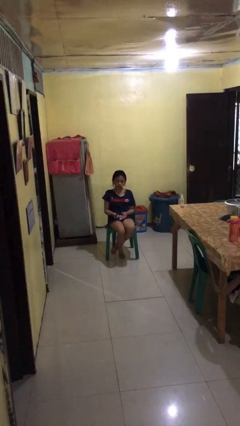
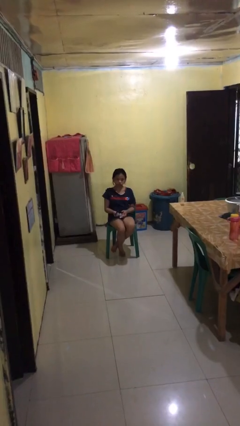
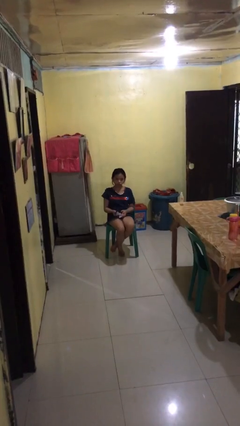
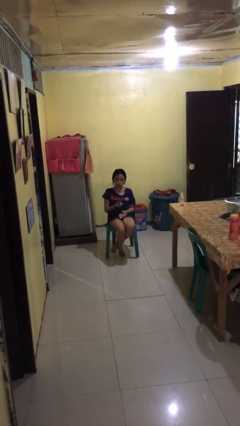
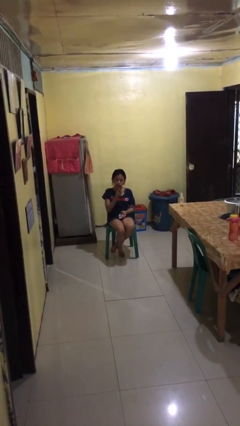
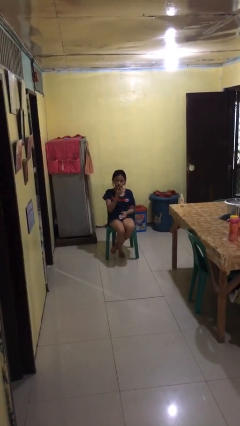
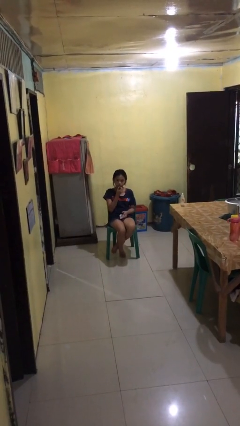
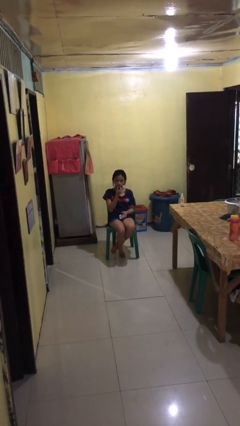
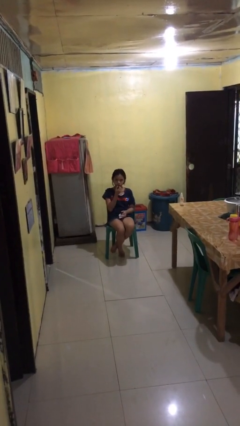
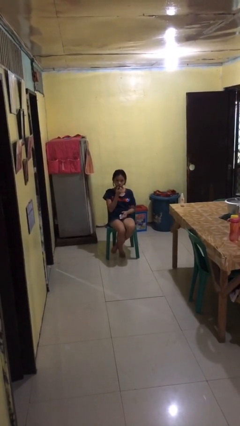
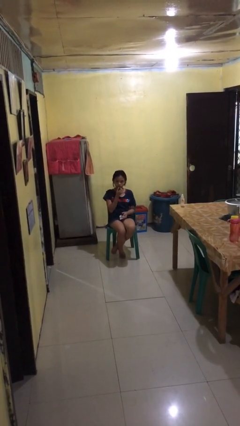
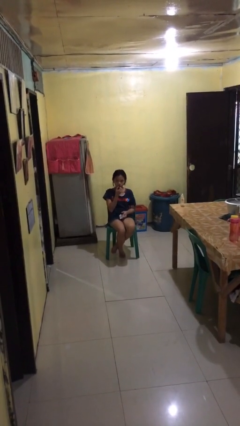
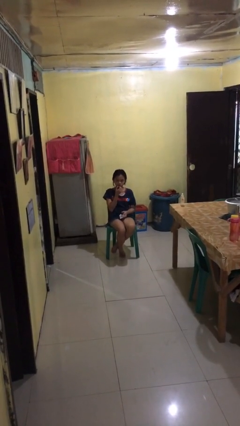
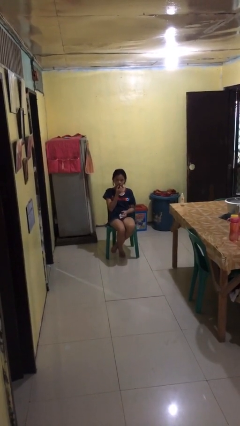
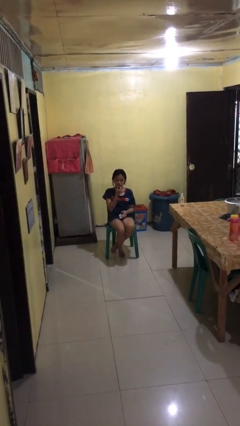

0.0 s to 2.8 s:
person applies lip makeup

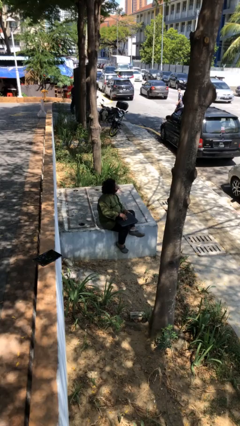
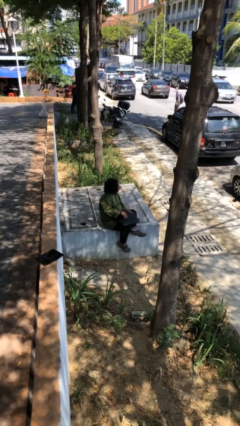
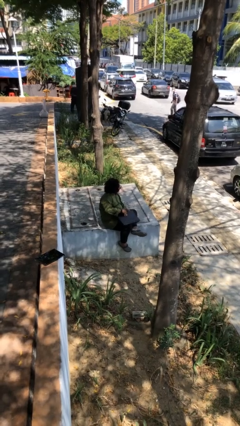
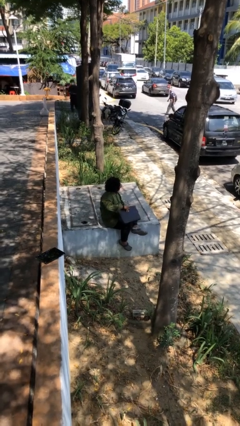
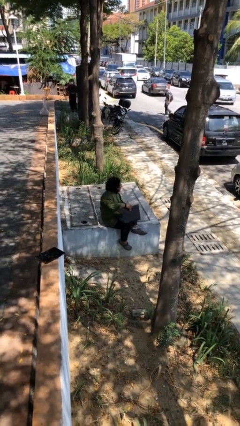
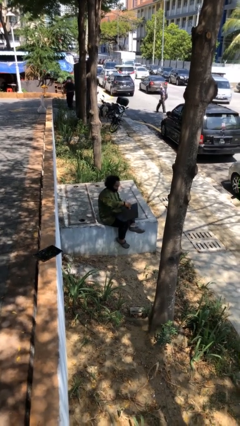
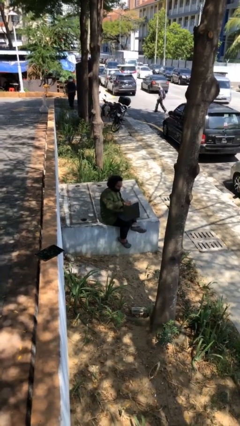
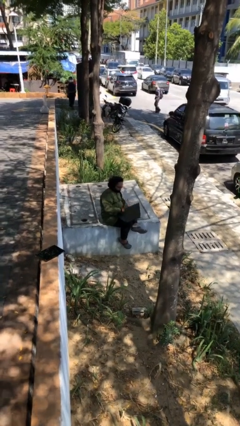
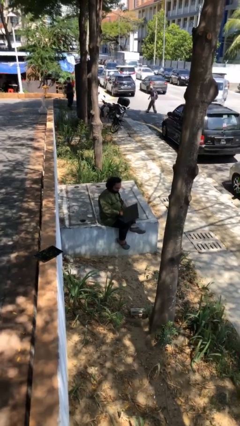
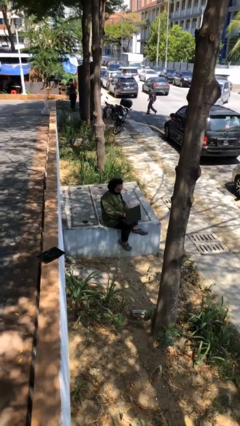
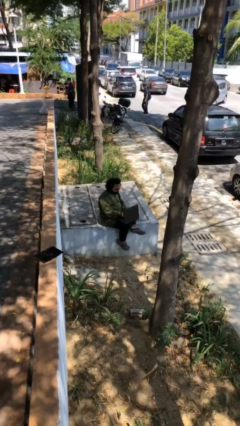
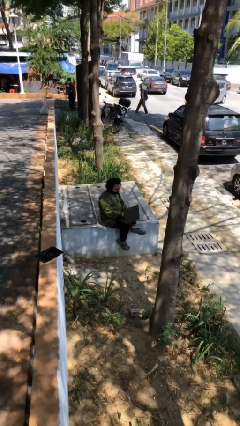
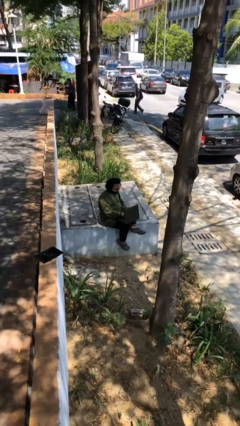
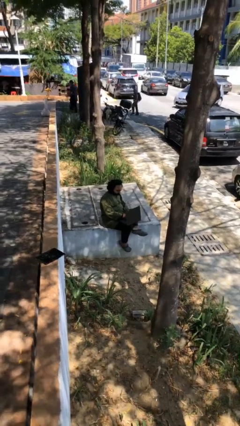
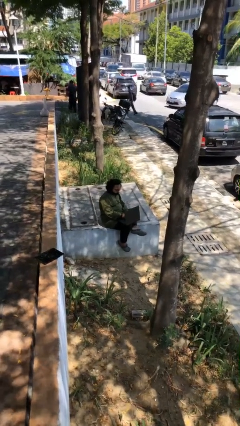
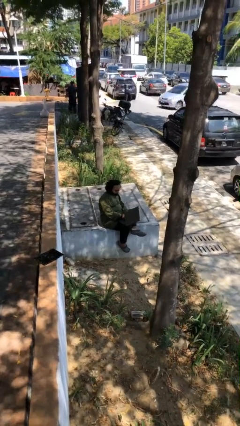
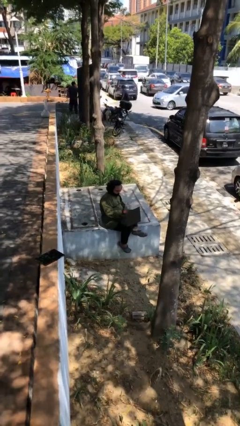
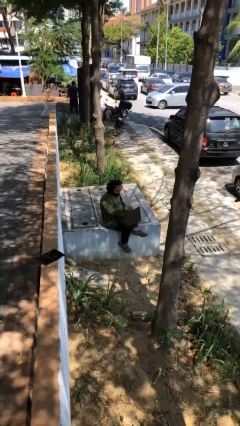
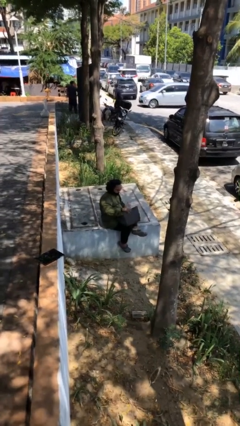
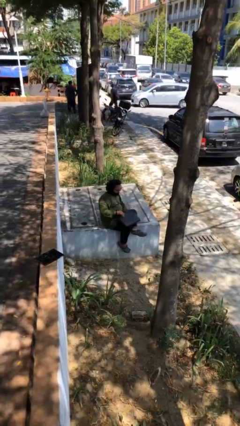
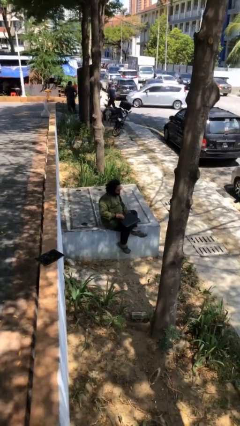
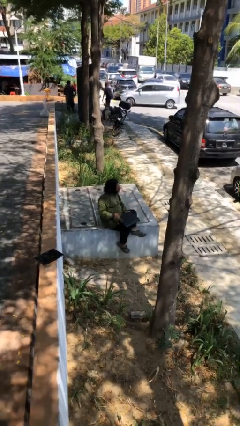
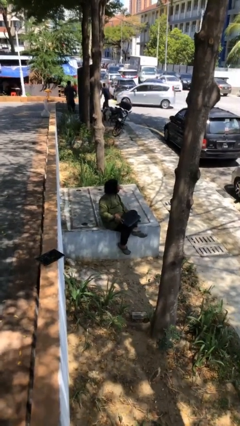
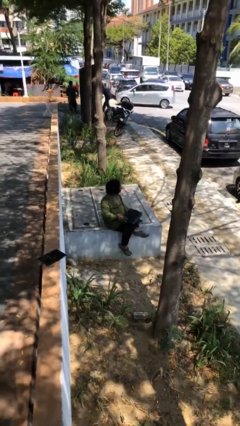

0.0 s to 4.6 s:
person interacts with laptop

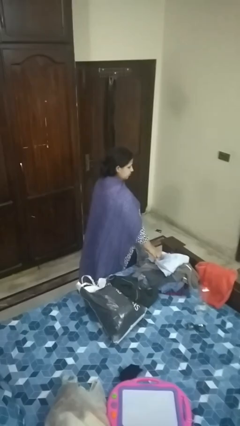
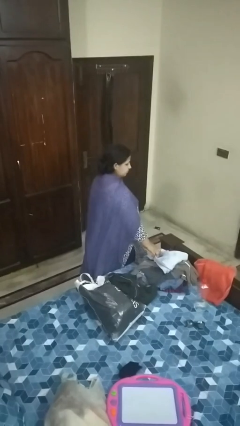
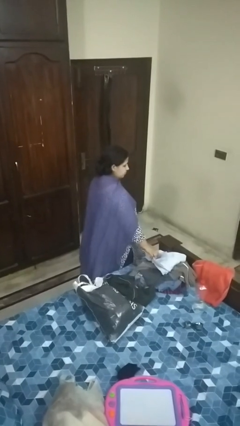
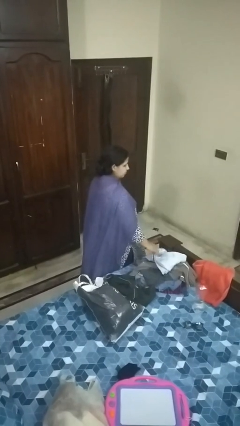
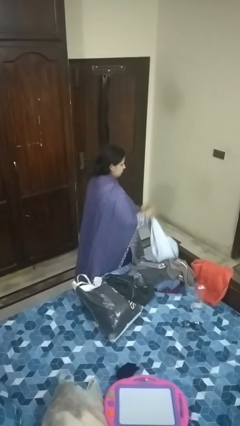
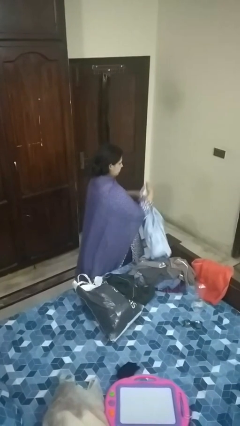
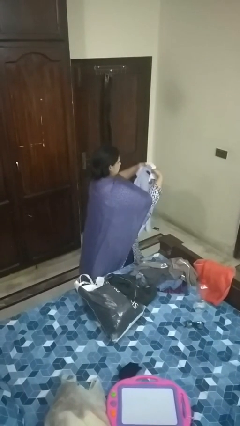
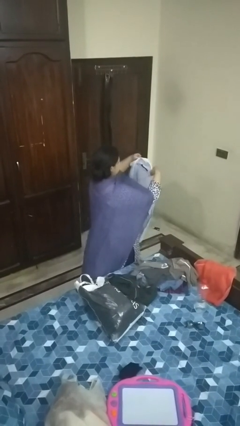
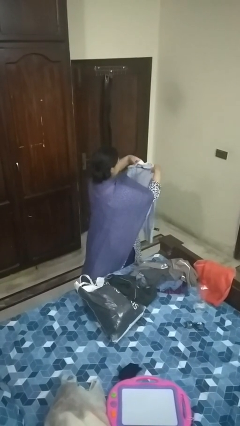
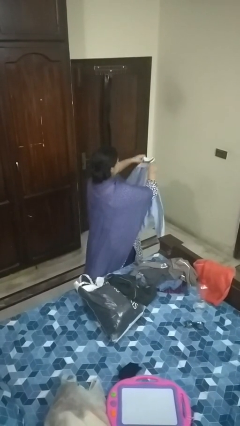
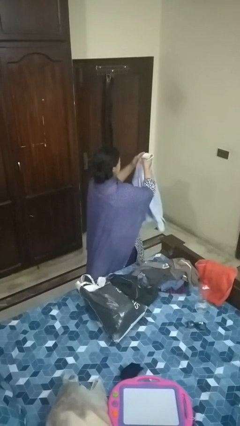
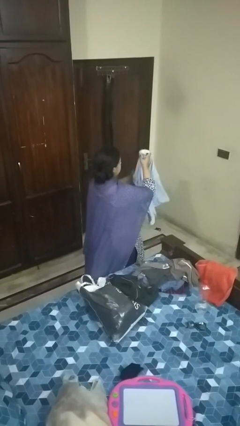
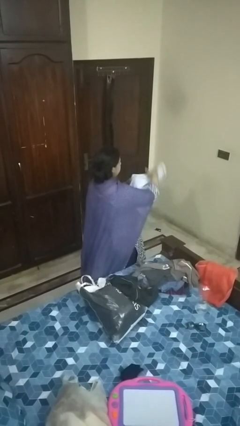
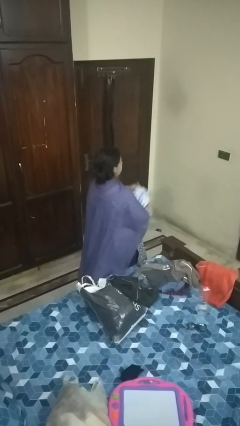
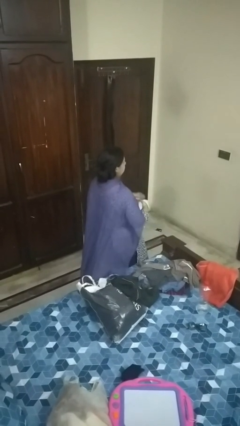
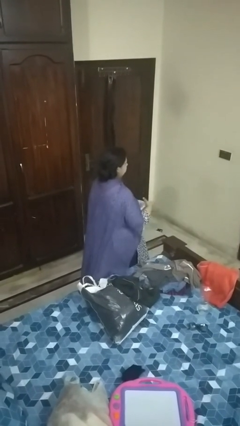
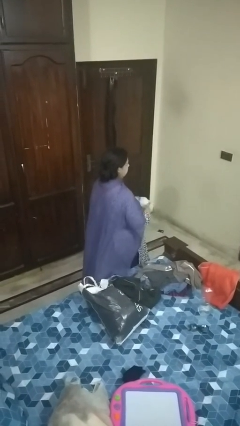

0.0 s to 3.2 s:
person folds shirt

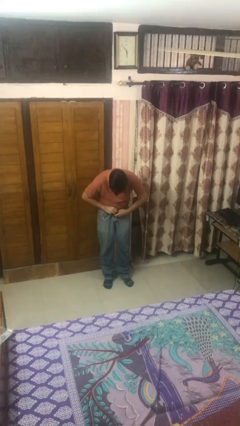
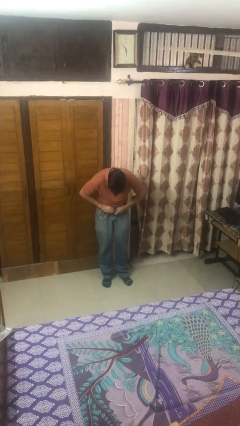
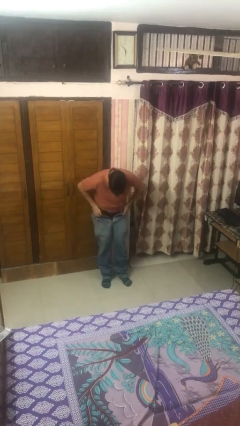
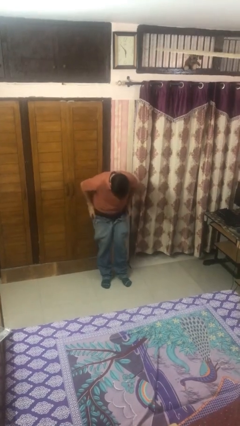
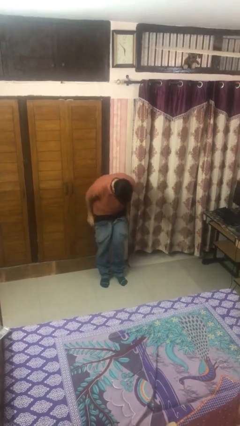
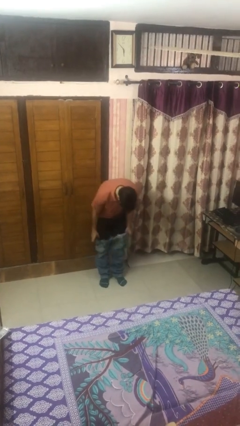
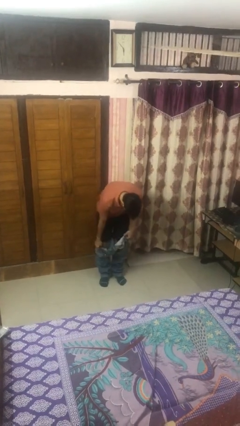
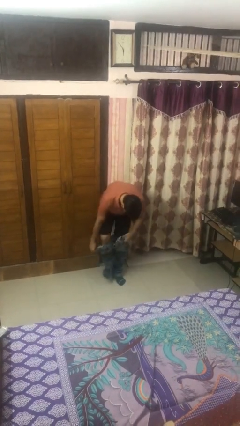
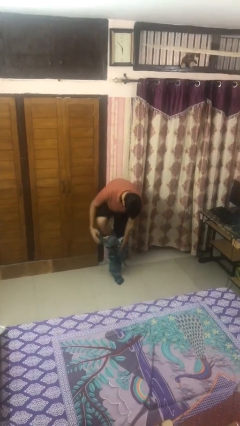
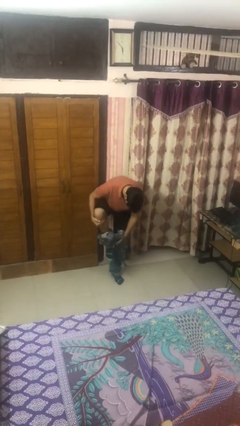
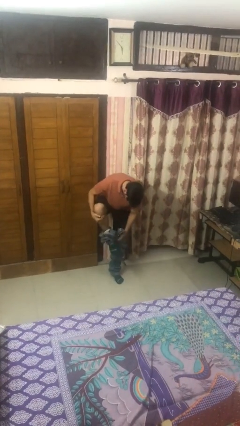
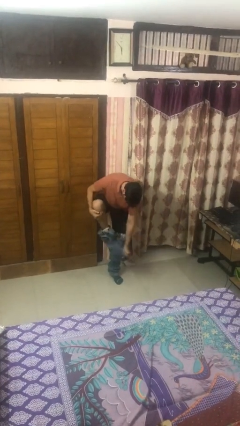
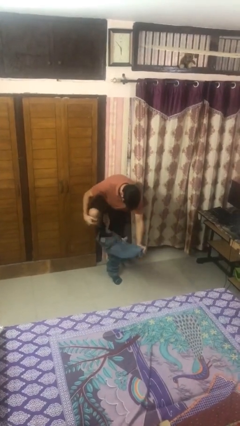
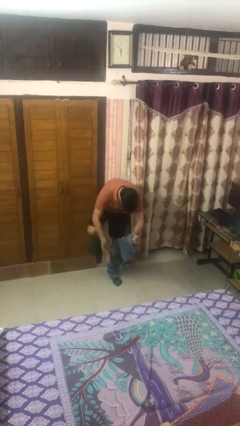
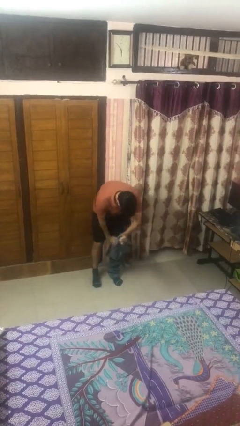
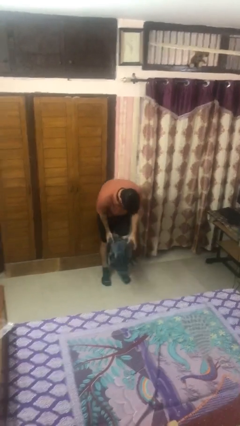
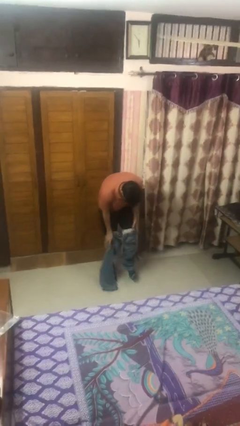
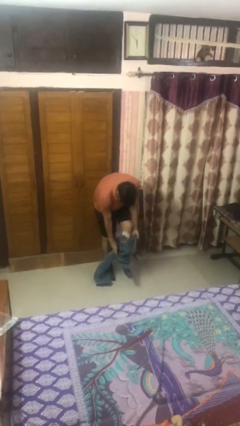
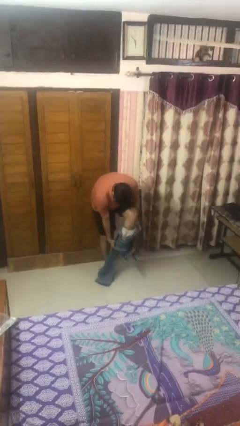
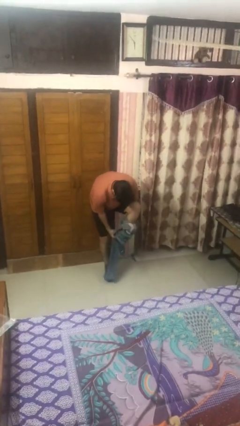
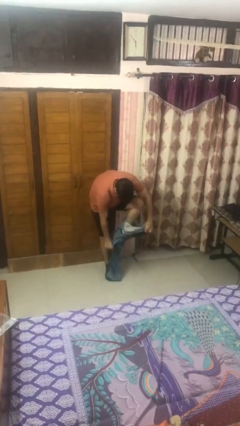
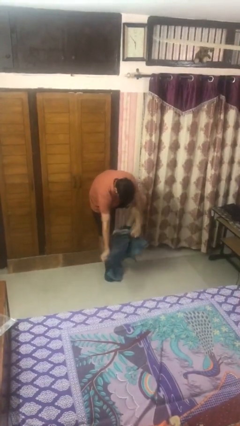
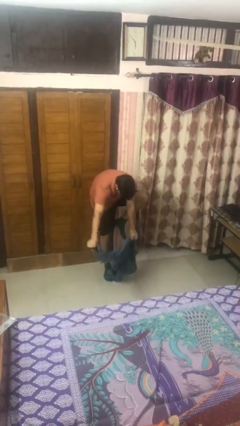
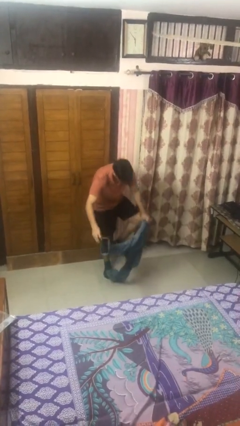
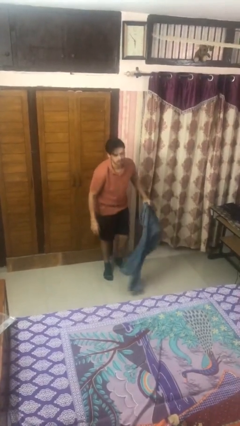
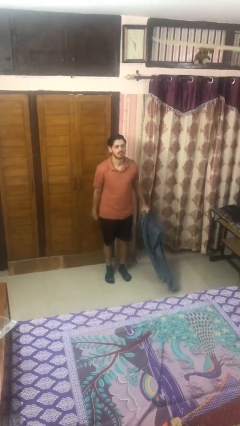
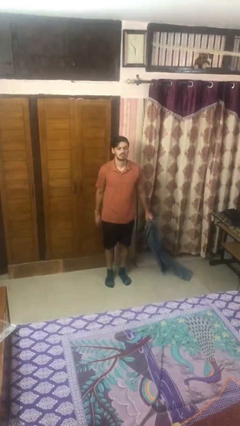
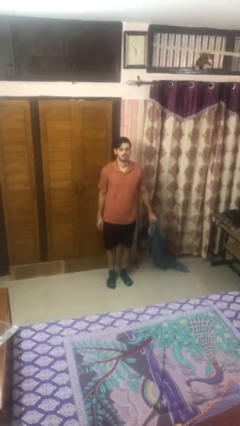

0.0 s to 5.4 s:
person takes off pants

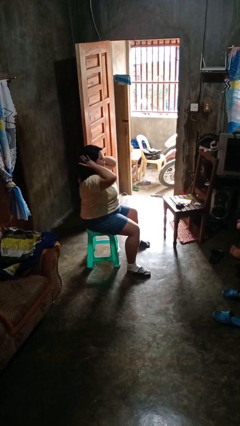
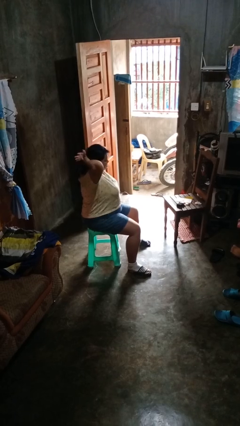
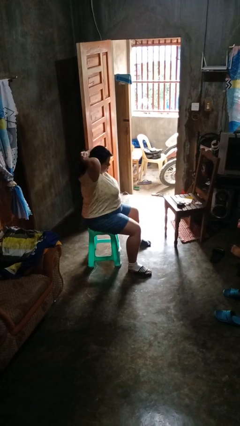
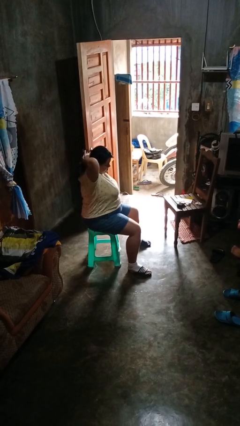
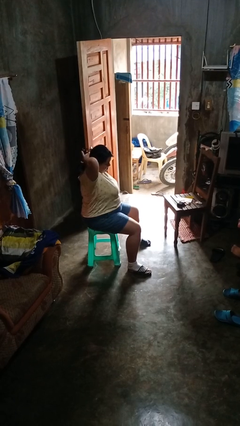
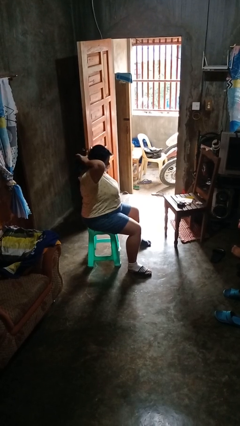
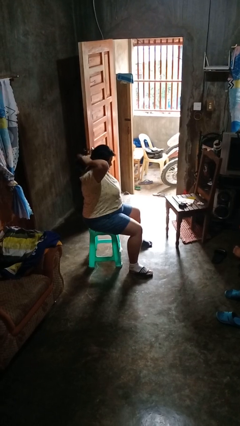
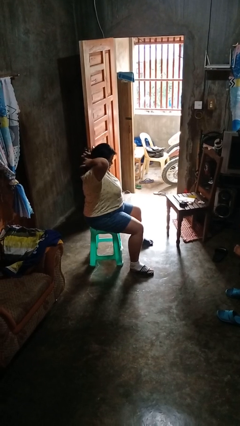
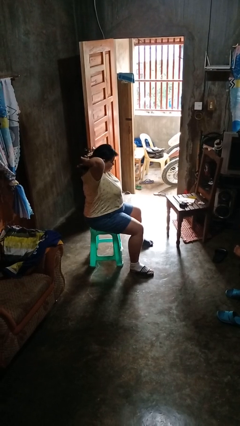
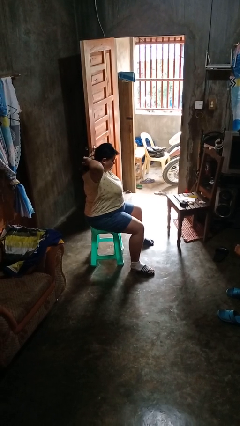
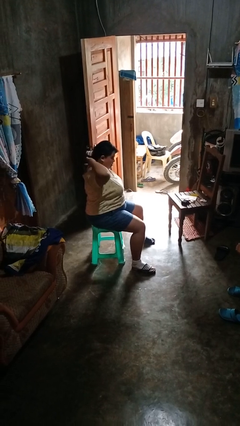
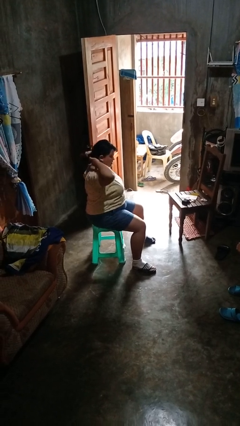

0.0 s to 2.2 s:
person puts hair in ponytail
